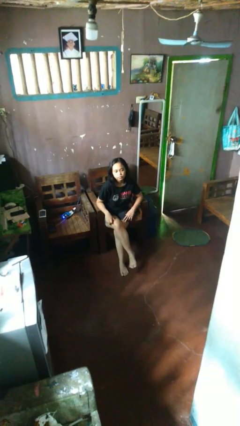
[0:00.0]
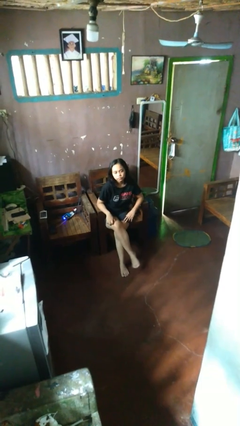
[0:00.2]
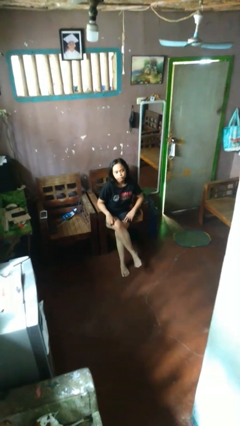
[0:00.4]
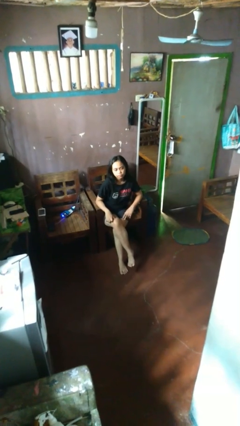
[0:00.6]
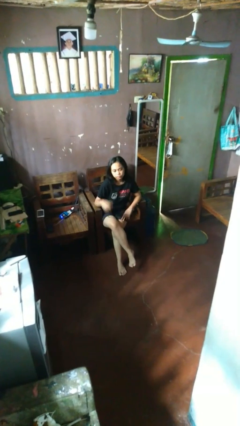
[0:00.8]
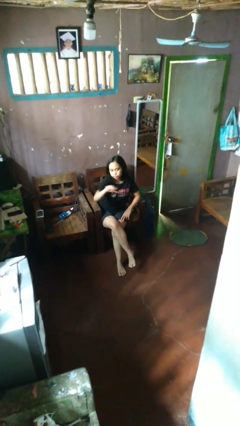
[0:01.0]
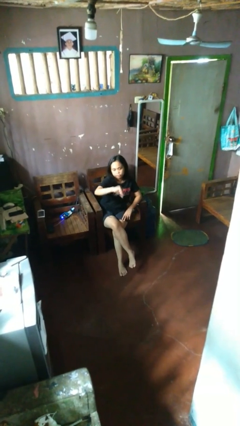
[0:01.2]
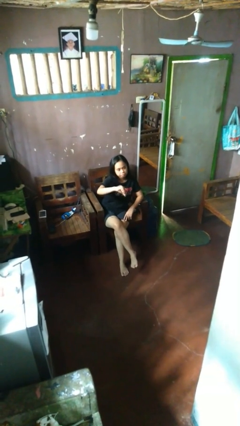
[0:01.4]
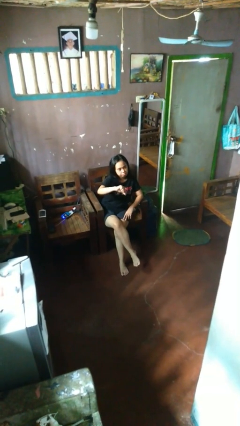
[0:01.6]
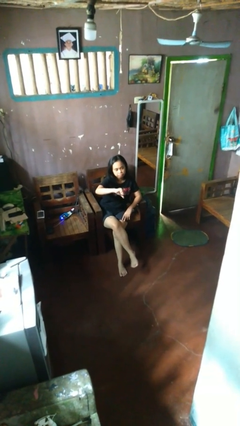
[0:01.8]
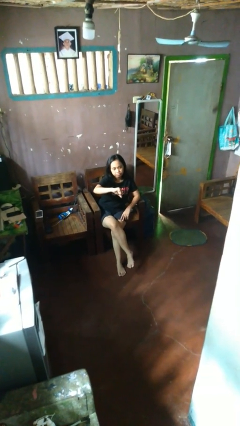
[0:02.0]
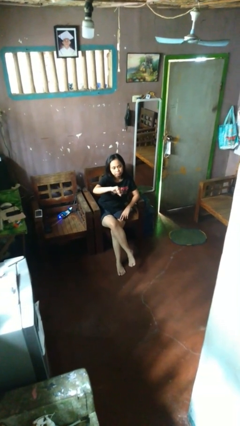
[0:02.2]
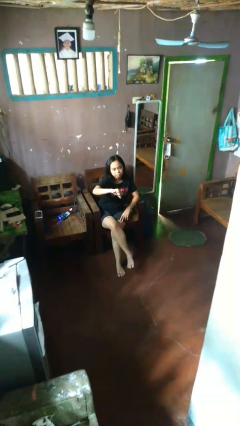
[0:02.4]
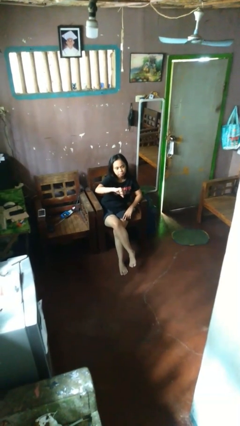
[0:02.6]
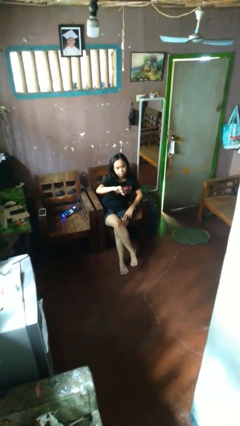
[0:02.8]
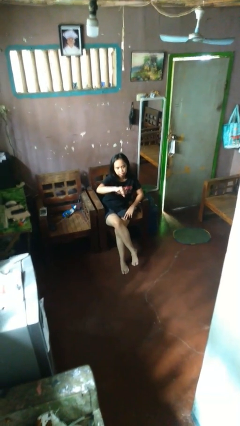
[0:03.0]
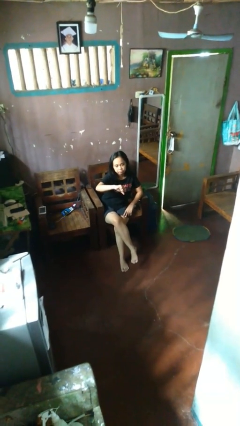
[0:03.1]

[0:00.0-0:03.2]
person gestures thumbs down

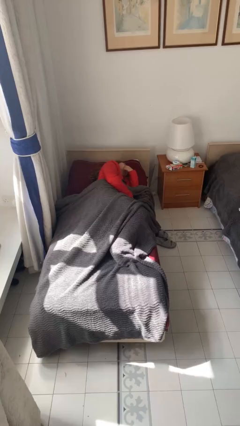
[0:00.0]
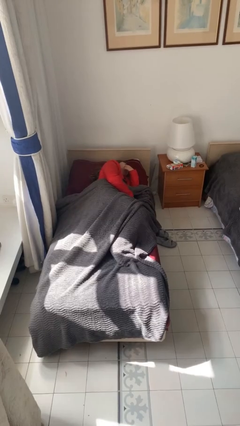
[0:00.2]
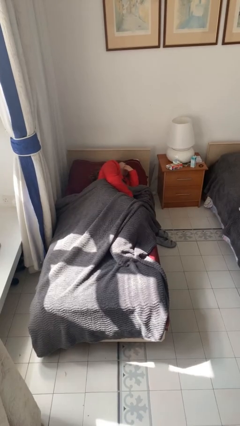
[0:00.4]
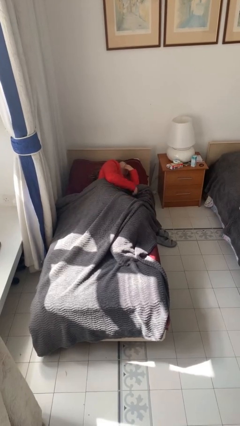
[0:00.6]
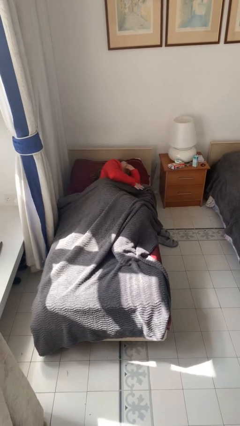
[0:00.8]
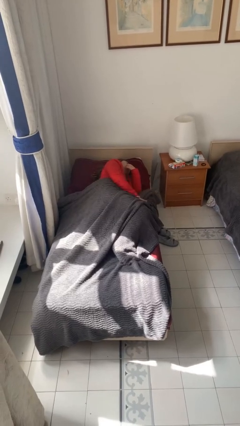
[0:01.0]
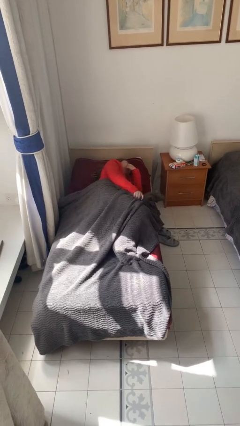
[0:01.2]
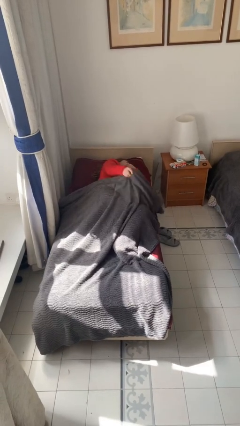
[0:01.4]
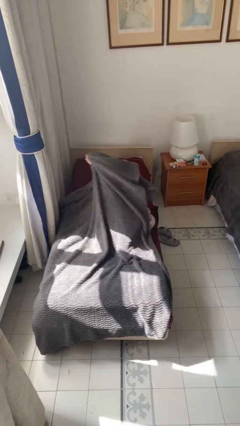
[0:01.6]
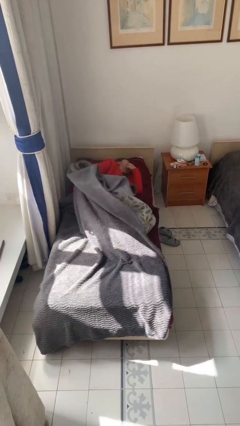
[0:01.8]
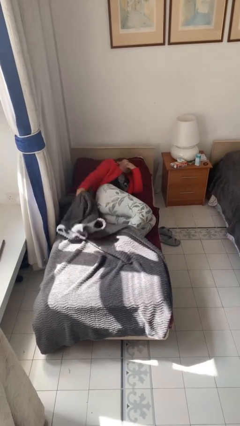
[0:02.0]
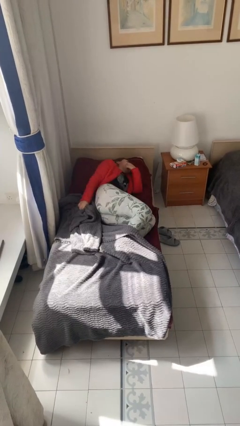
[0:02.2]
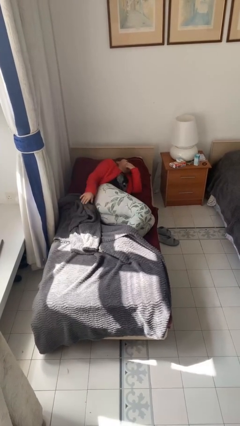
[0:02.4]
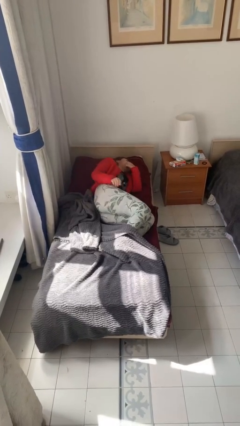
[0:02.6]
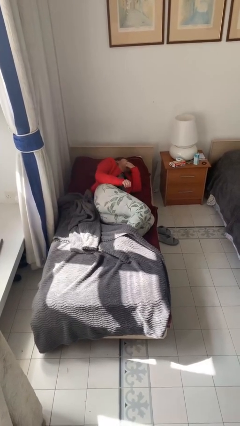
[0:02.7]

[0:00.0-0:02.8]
person uncovers with bedsheets

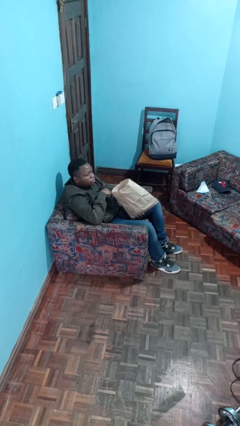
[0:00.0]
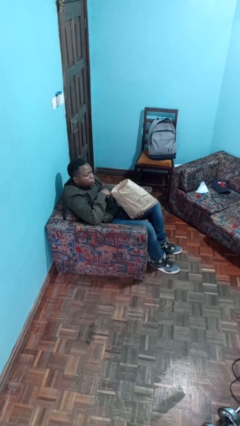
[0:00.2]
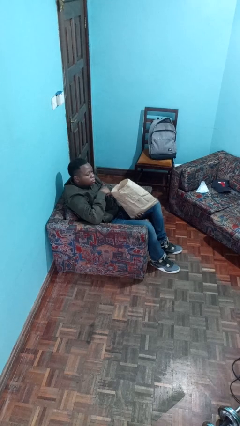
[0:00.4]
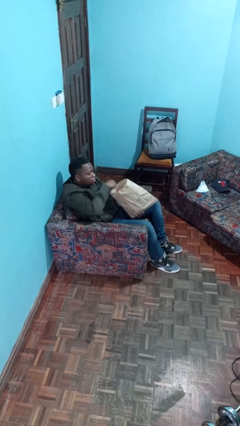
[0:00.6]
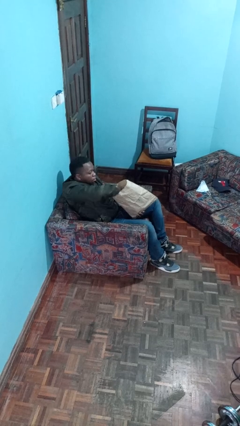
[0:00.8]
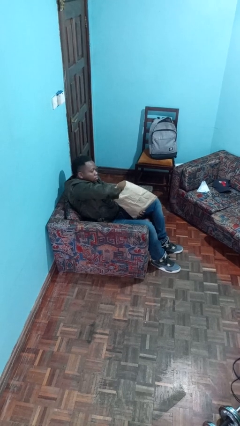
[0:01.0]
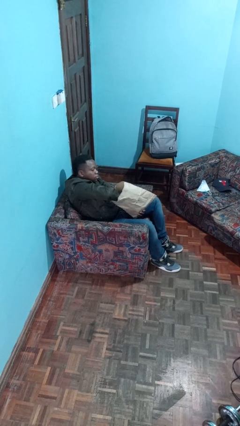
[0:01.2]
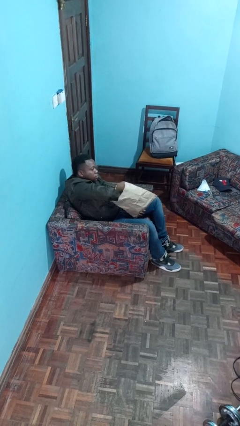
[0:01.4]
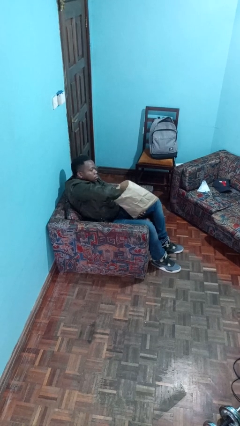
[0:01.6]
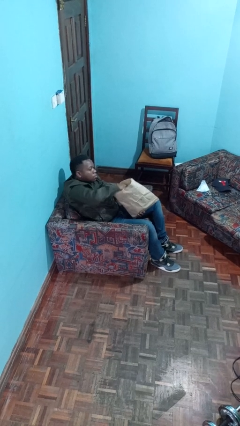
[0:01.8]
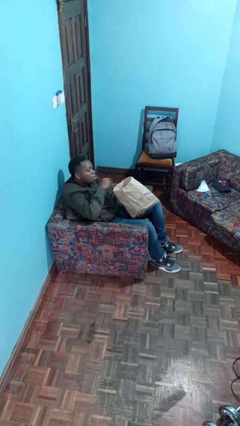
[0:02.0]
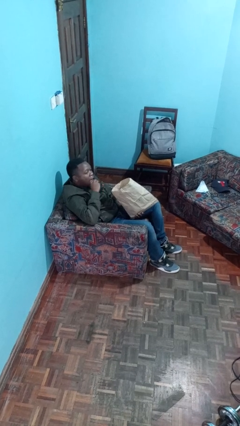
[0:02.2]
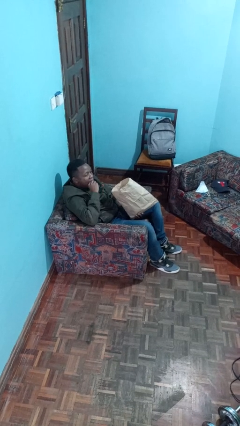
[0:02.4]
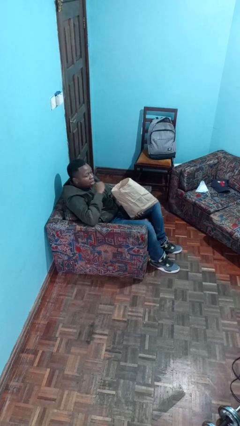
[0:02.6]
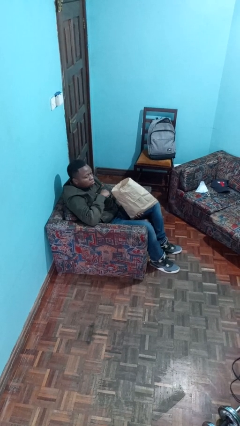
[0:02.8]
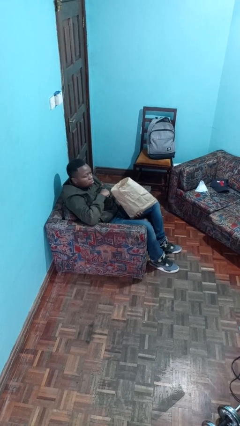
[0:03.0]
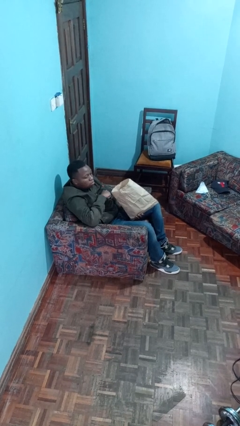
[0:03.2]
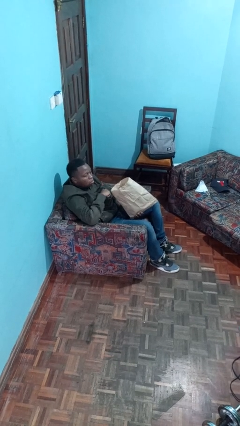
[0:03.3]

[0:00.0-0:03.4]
person eats snack from bag

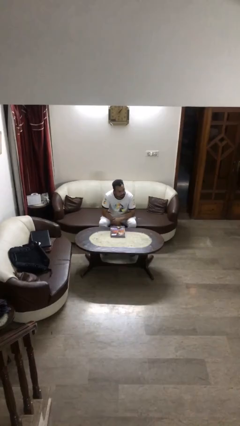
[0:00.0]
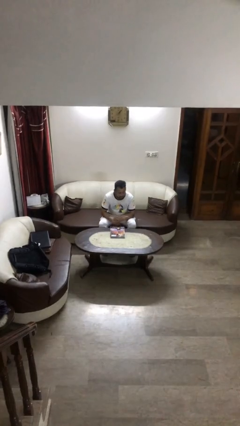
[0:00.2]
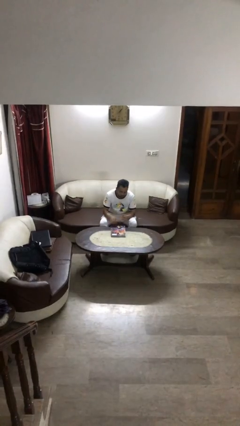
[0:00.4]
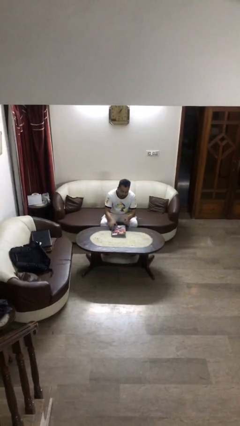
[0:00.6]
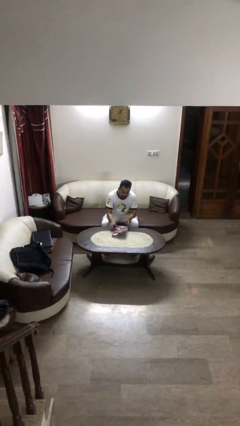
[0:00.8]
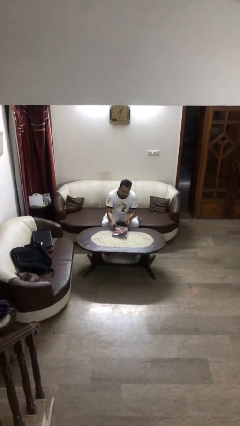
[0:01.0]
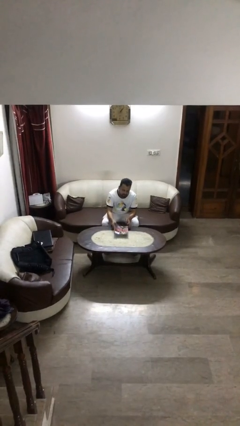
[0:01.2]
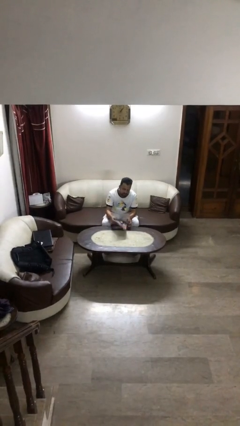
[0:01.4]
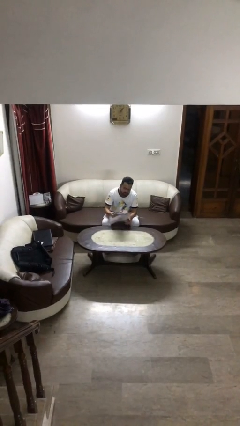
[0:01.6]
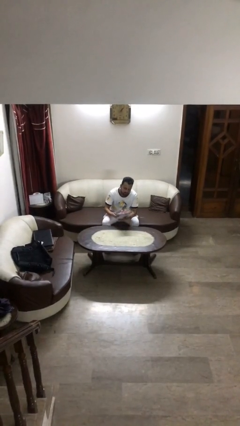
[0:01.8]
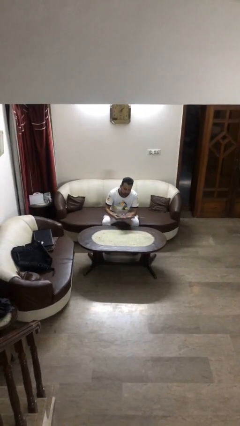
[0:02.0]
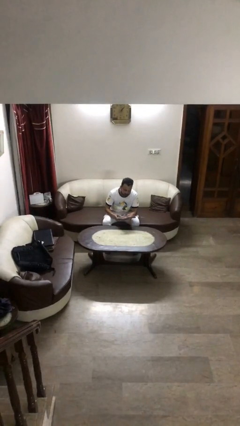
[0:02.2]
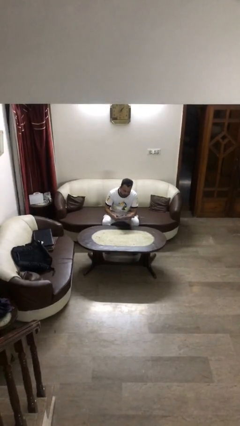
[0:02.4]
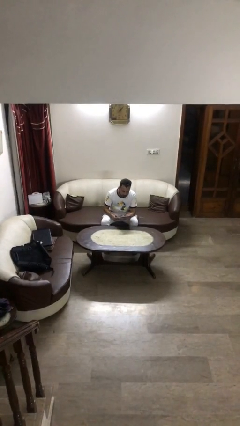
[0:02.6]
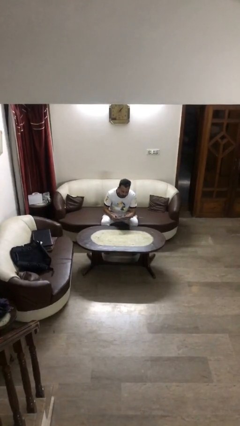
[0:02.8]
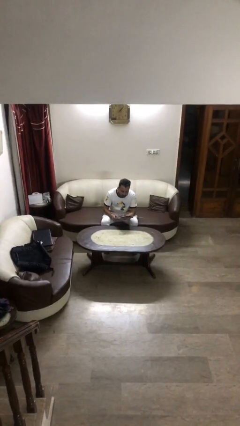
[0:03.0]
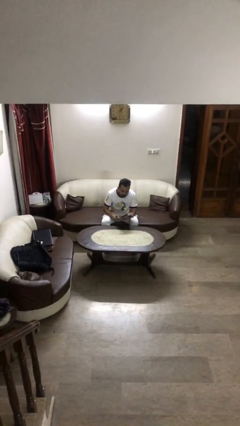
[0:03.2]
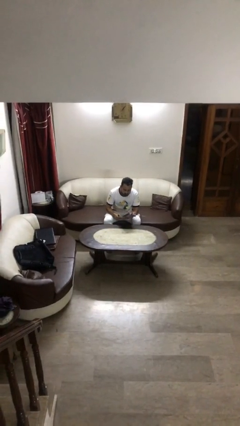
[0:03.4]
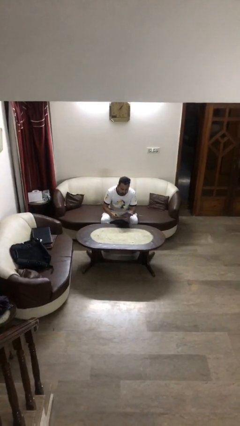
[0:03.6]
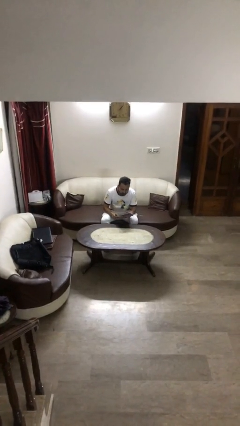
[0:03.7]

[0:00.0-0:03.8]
person picks up object from table

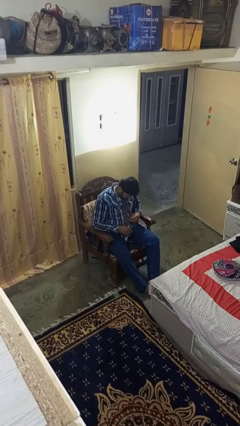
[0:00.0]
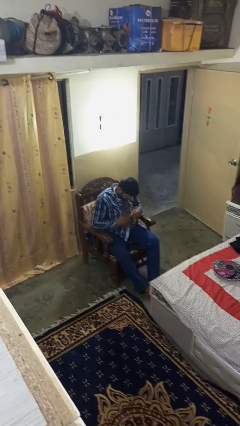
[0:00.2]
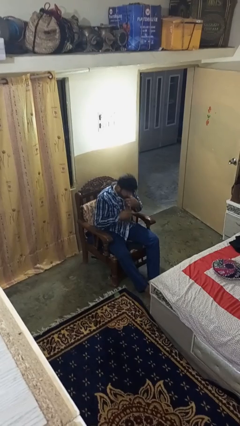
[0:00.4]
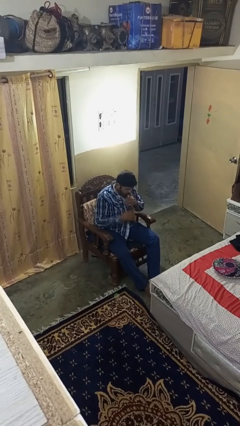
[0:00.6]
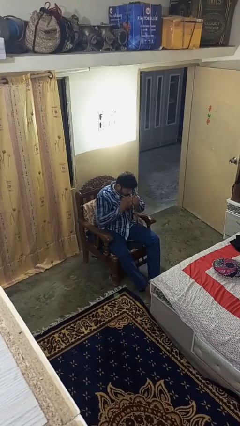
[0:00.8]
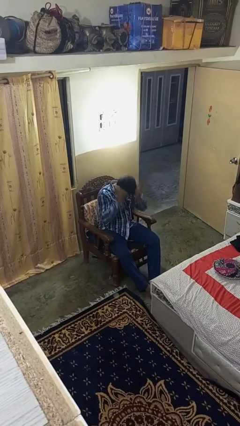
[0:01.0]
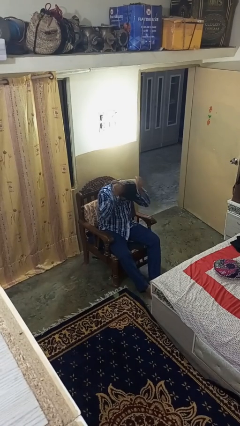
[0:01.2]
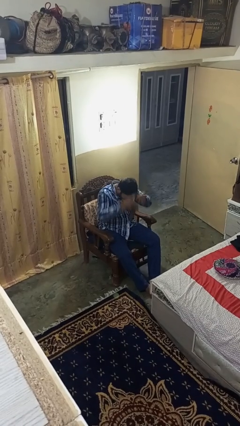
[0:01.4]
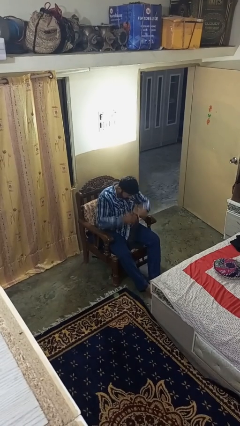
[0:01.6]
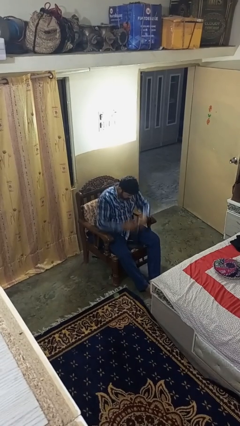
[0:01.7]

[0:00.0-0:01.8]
person takes off necktie

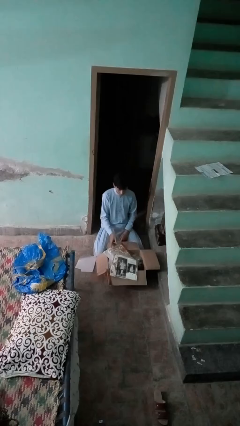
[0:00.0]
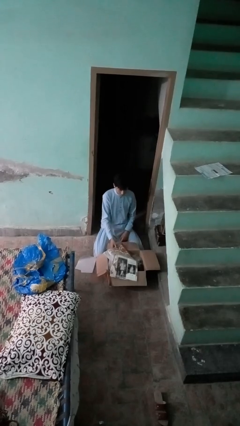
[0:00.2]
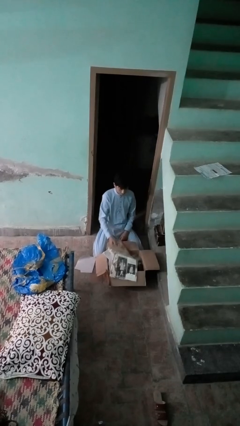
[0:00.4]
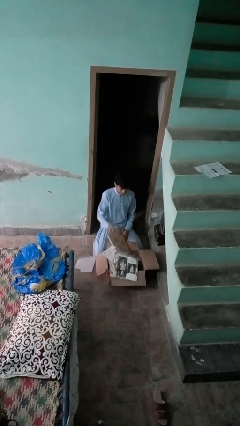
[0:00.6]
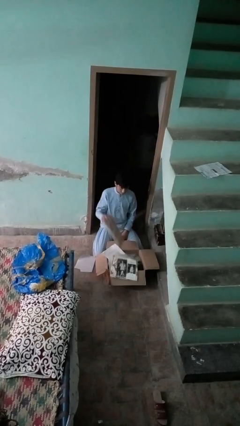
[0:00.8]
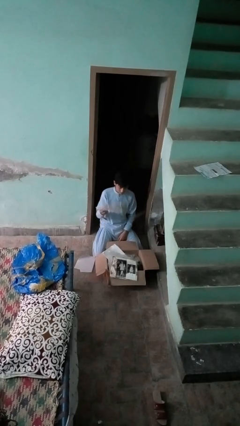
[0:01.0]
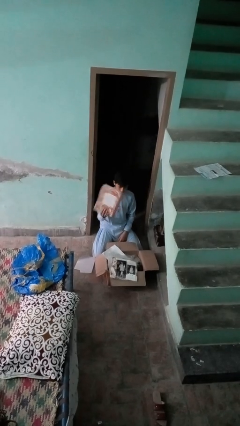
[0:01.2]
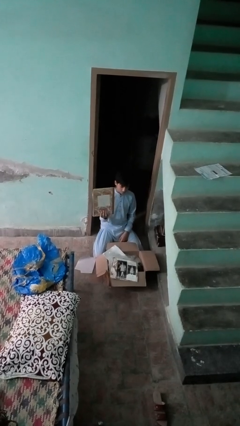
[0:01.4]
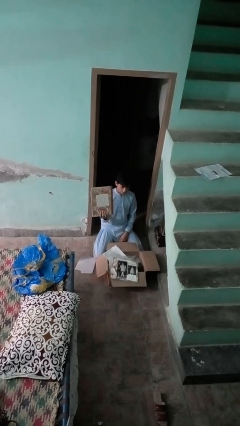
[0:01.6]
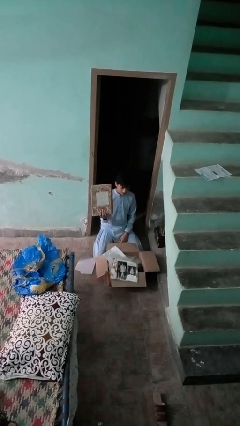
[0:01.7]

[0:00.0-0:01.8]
person takes object from box

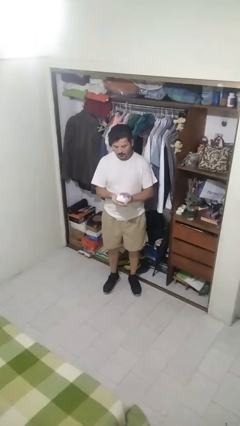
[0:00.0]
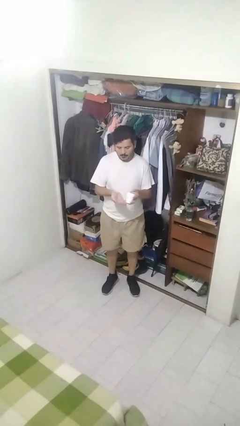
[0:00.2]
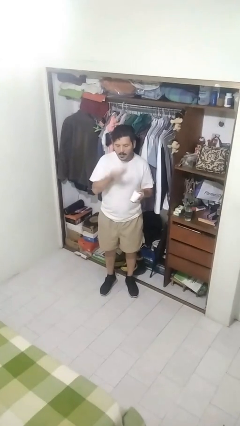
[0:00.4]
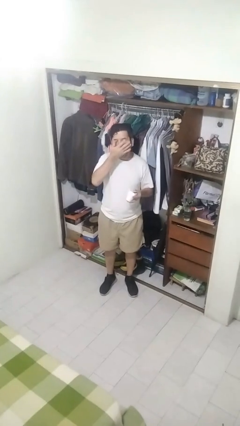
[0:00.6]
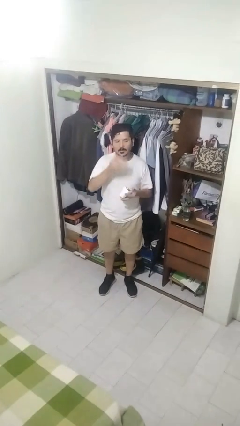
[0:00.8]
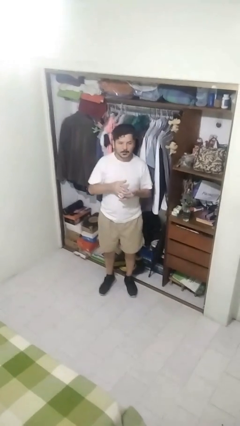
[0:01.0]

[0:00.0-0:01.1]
person takes medicine pills
